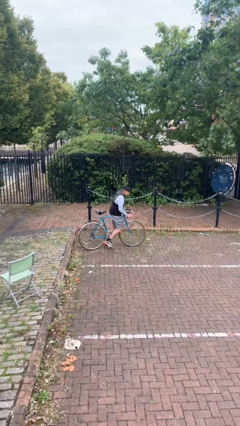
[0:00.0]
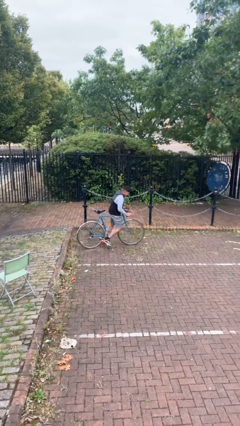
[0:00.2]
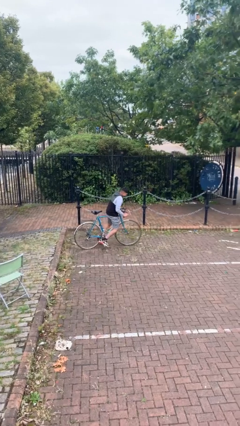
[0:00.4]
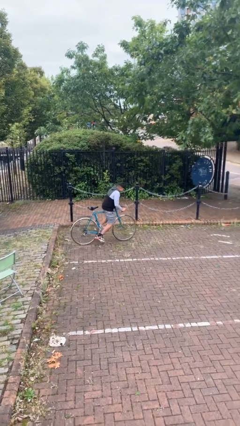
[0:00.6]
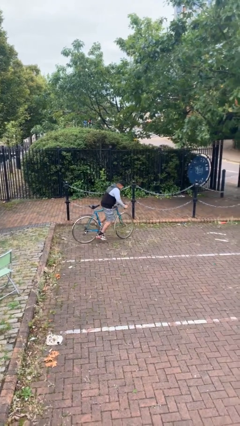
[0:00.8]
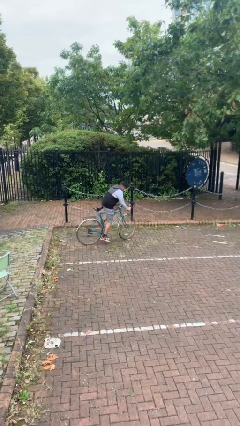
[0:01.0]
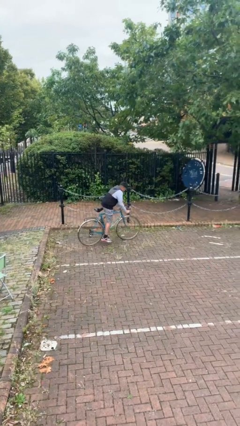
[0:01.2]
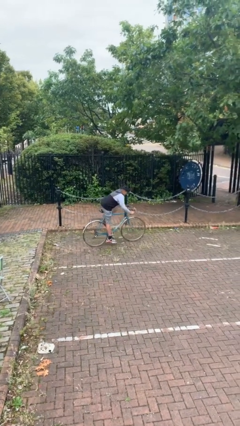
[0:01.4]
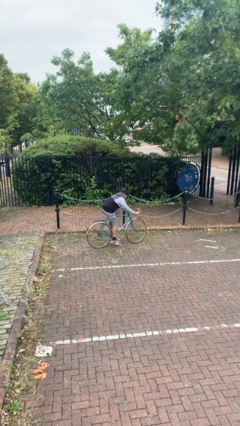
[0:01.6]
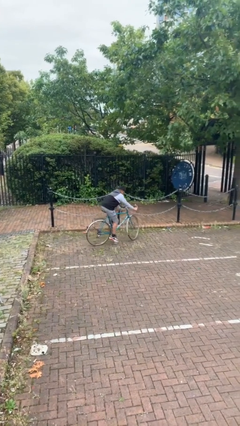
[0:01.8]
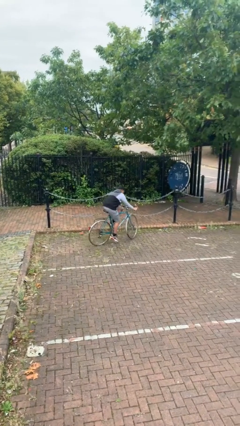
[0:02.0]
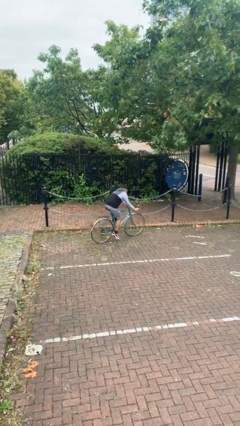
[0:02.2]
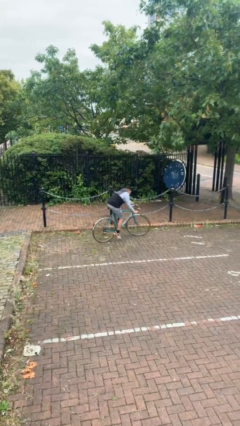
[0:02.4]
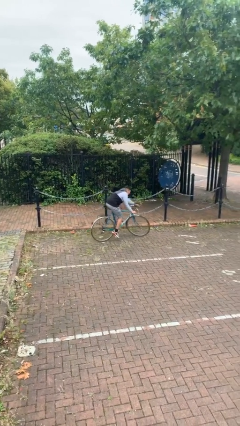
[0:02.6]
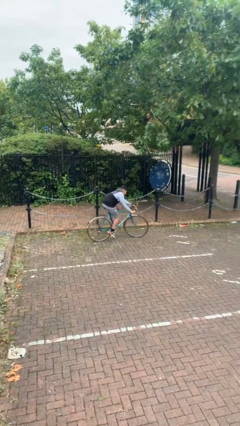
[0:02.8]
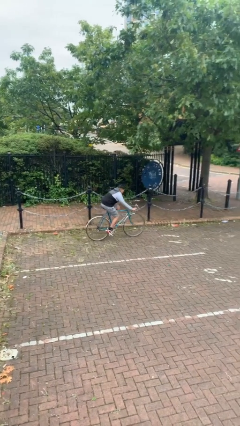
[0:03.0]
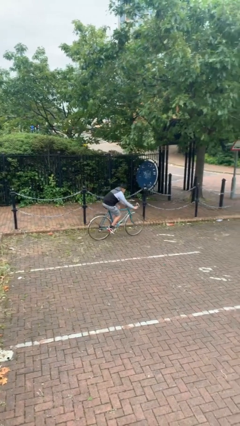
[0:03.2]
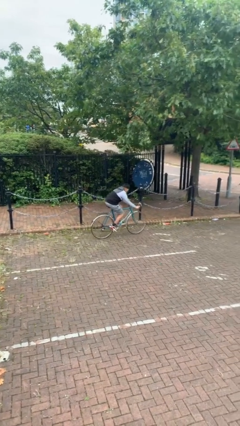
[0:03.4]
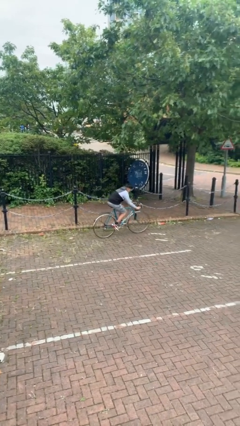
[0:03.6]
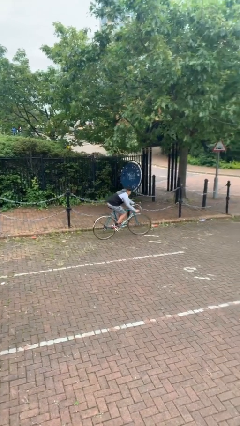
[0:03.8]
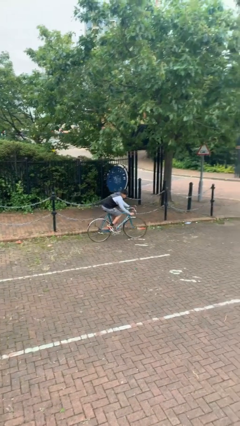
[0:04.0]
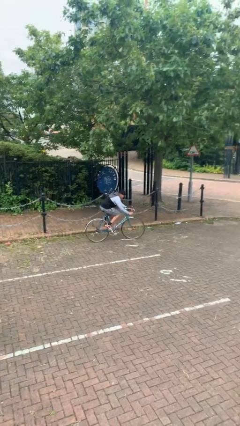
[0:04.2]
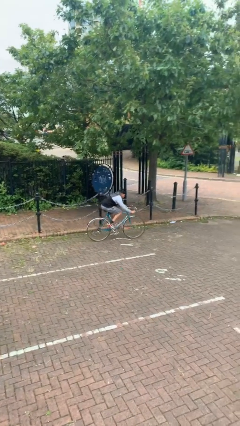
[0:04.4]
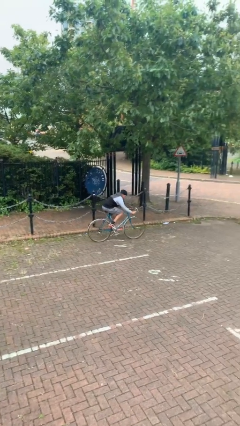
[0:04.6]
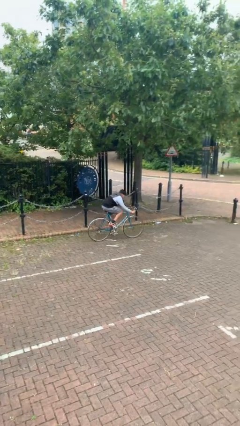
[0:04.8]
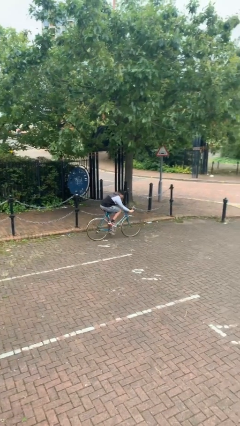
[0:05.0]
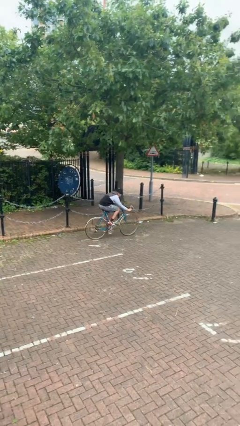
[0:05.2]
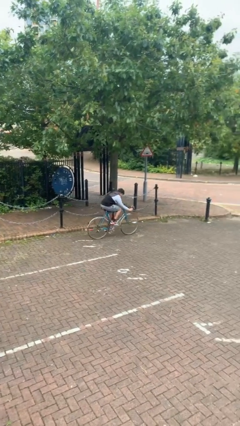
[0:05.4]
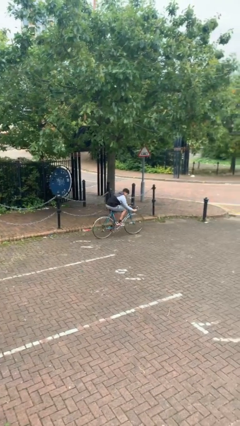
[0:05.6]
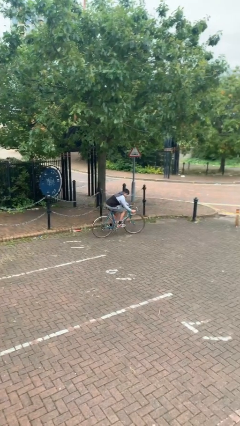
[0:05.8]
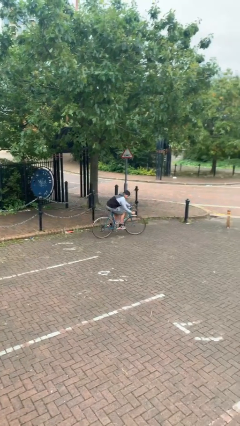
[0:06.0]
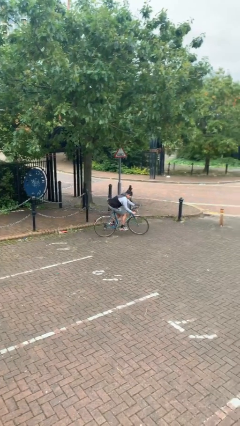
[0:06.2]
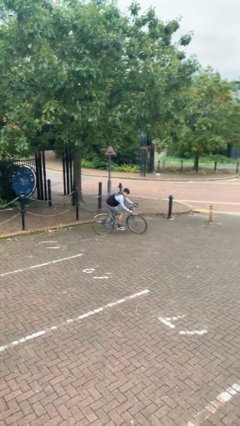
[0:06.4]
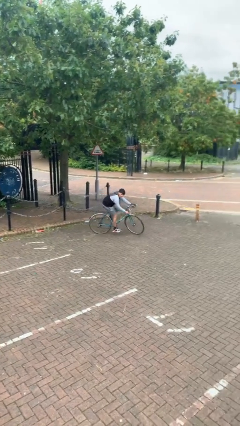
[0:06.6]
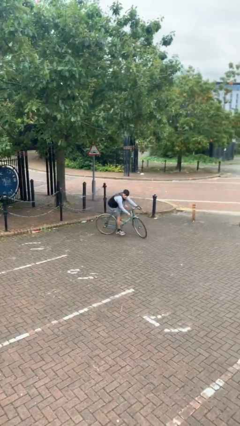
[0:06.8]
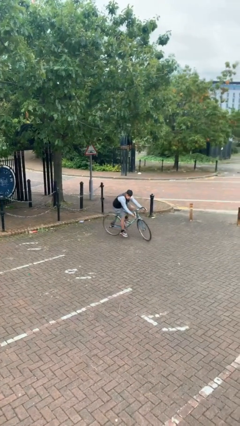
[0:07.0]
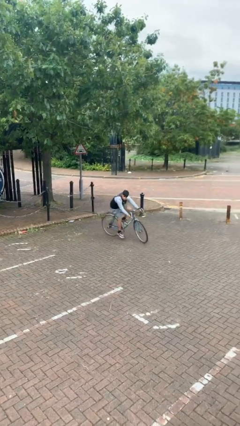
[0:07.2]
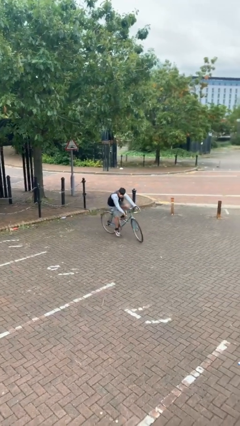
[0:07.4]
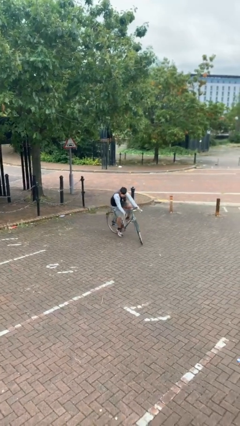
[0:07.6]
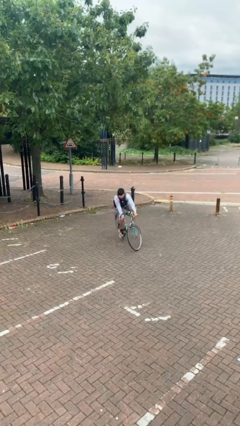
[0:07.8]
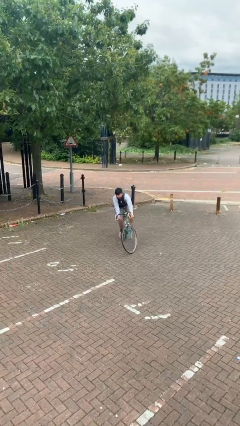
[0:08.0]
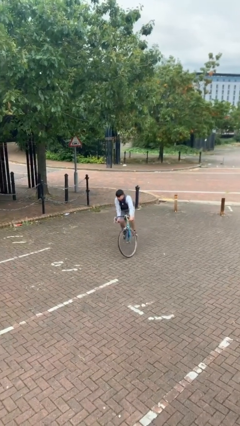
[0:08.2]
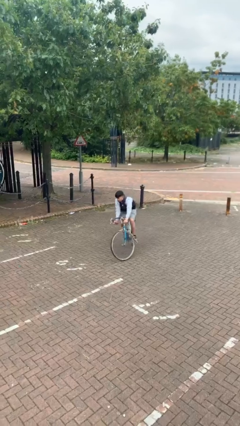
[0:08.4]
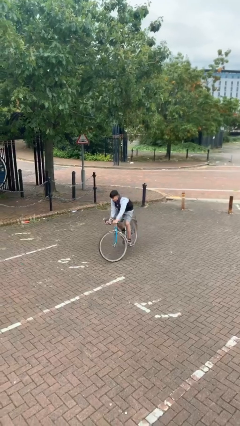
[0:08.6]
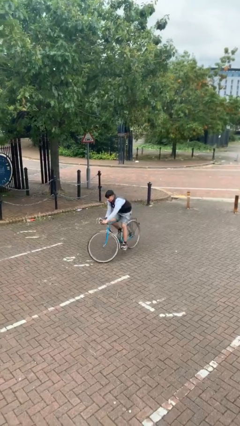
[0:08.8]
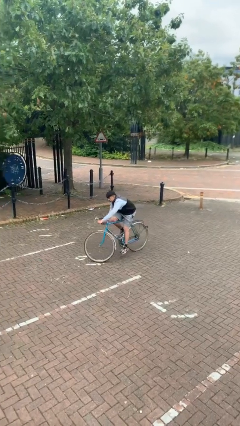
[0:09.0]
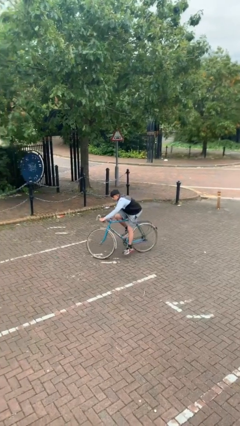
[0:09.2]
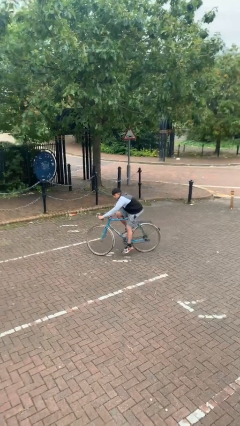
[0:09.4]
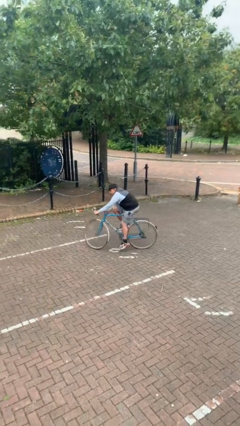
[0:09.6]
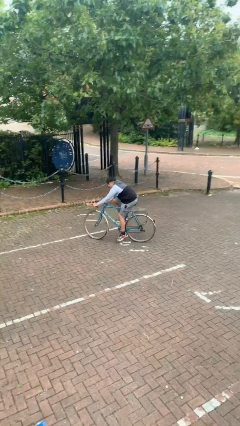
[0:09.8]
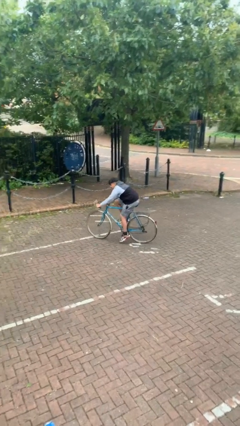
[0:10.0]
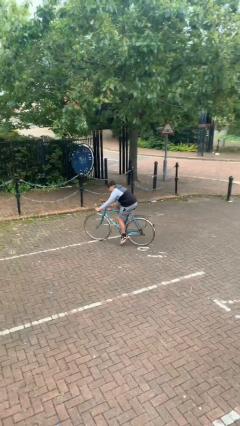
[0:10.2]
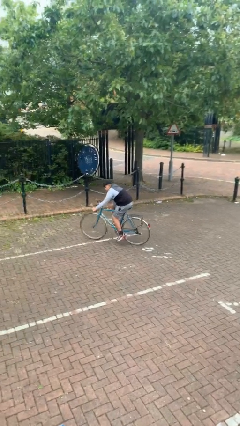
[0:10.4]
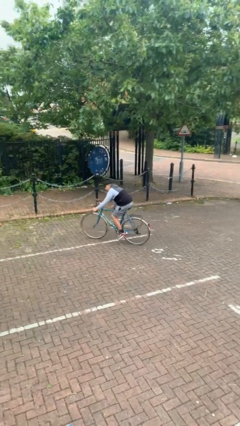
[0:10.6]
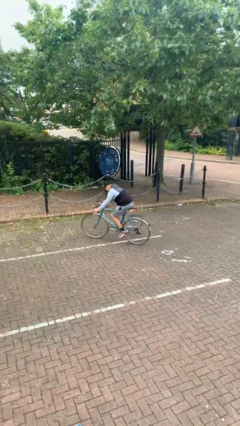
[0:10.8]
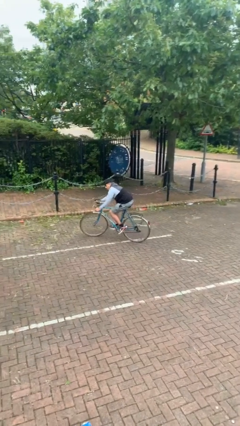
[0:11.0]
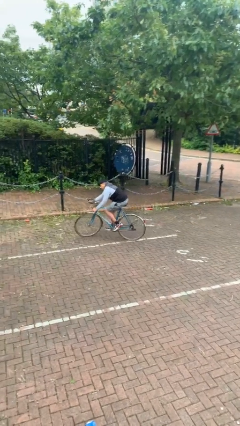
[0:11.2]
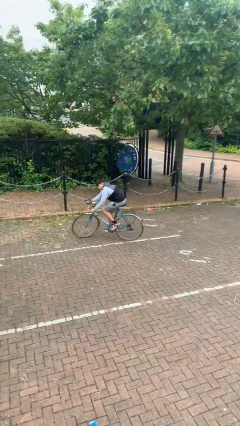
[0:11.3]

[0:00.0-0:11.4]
person rides bicycle

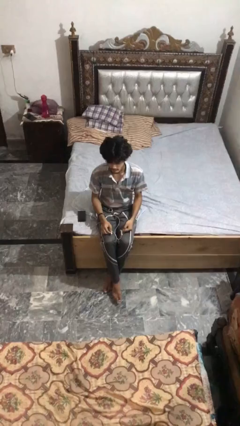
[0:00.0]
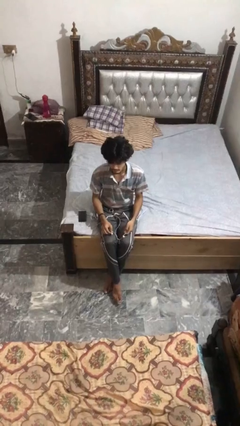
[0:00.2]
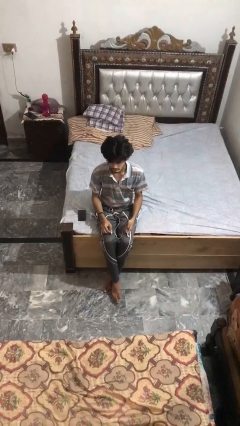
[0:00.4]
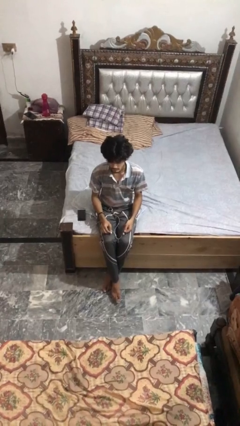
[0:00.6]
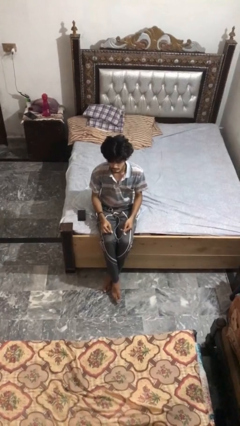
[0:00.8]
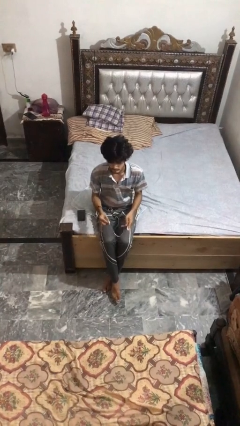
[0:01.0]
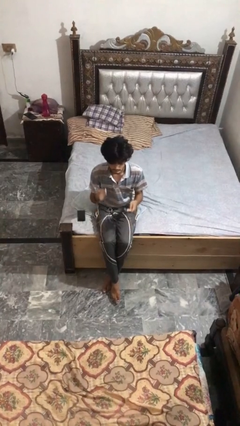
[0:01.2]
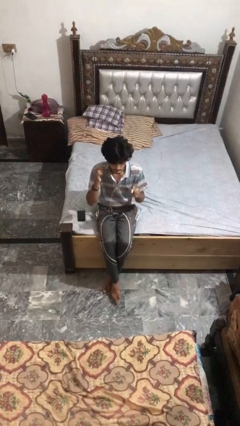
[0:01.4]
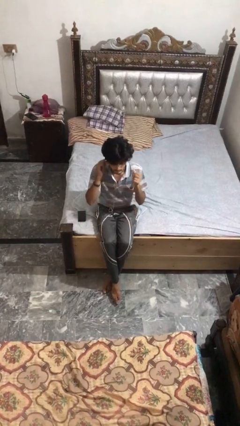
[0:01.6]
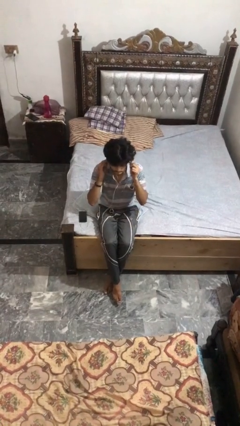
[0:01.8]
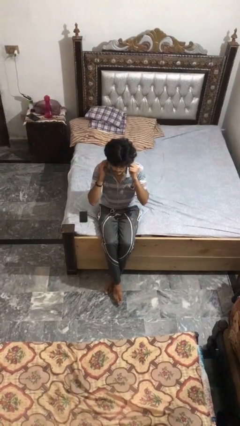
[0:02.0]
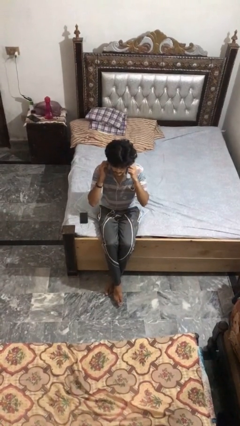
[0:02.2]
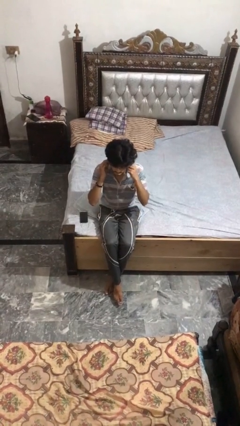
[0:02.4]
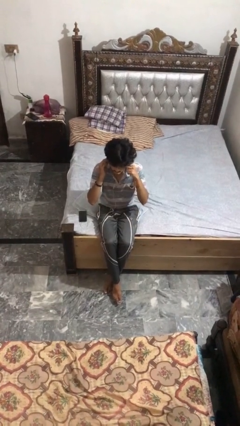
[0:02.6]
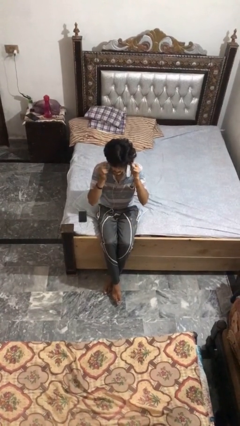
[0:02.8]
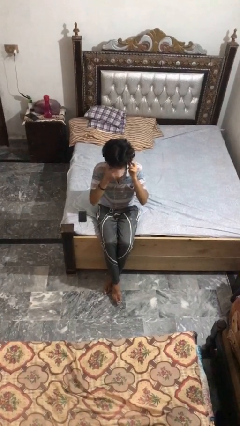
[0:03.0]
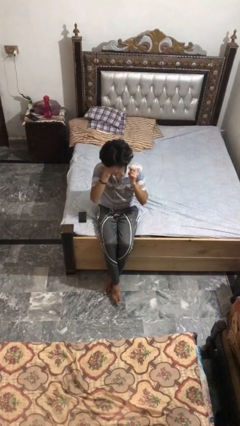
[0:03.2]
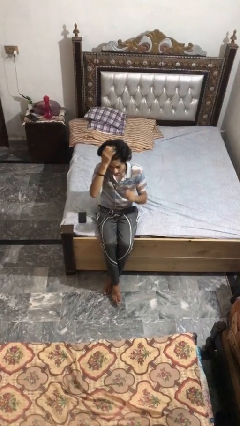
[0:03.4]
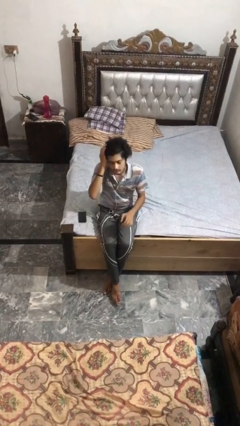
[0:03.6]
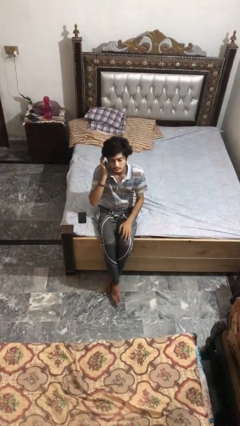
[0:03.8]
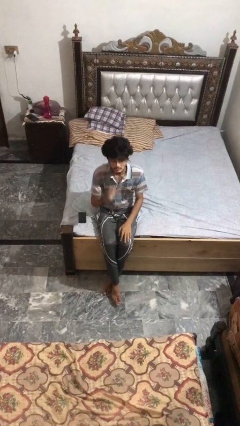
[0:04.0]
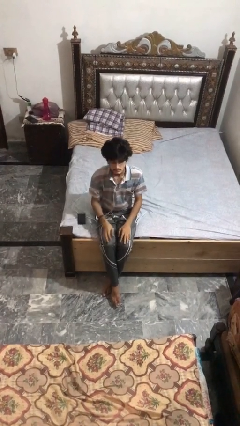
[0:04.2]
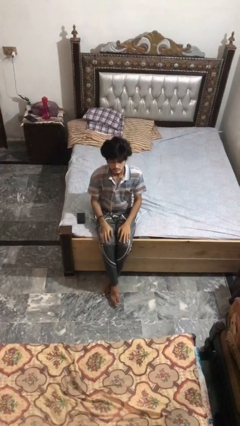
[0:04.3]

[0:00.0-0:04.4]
person puts on headphones

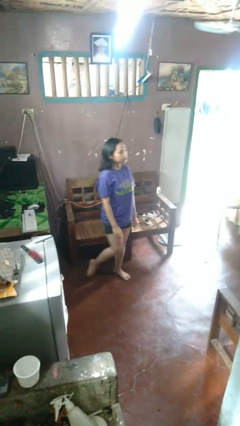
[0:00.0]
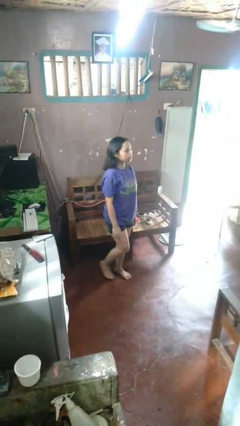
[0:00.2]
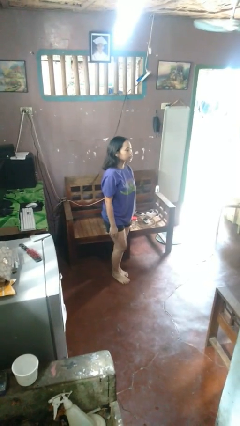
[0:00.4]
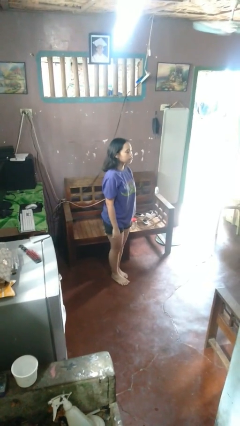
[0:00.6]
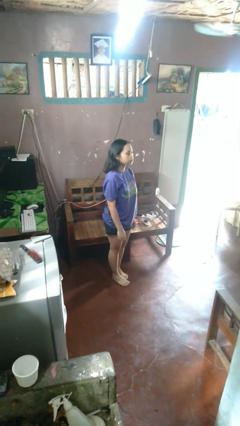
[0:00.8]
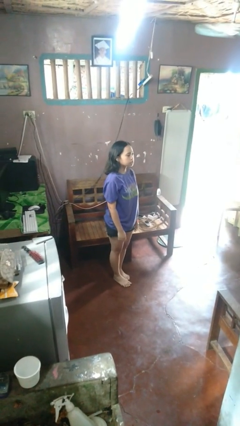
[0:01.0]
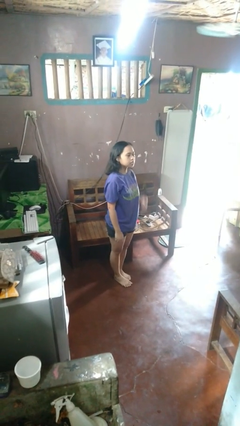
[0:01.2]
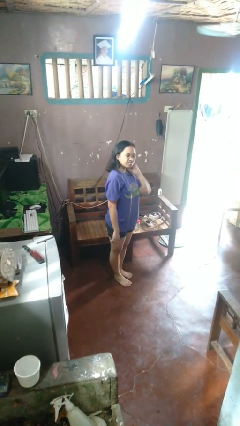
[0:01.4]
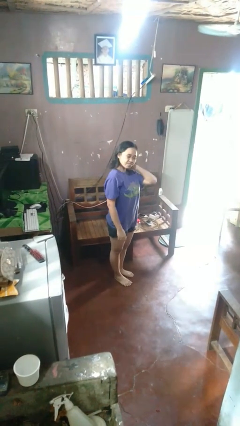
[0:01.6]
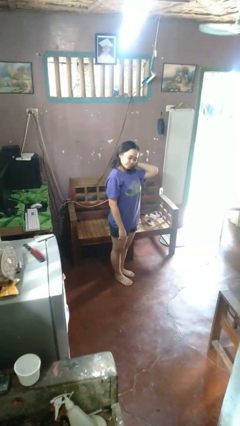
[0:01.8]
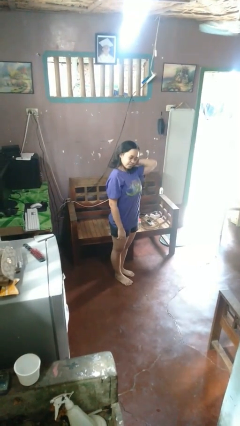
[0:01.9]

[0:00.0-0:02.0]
person rubs neck
